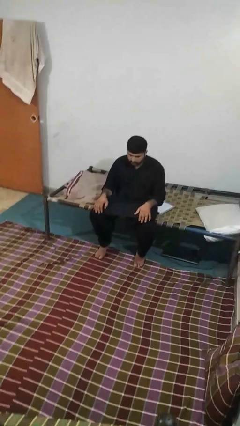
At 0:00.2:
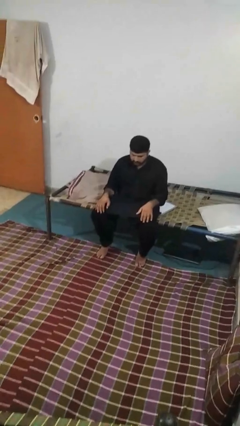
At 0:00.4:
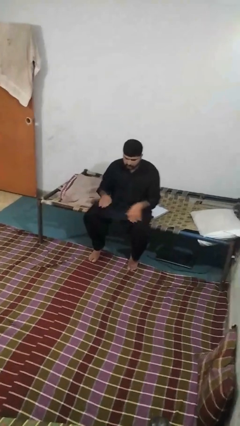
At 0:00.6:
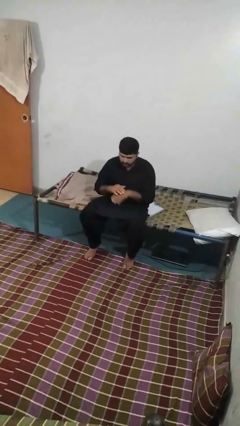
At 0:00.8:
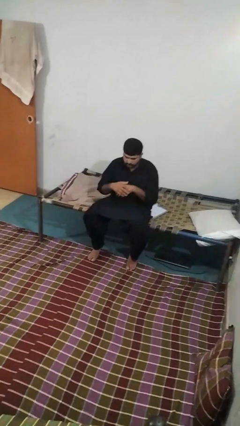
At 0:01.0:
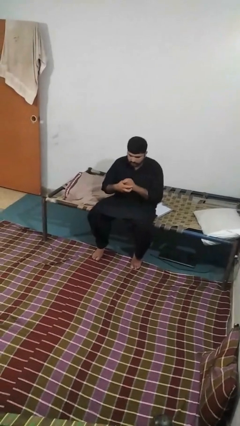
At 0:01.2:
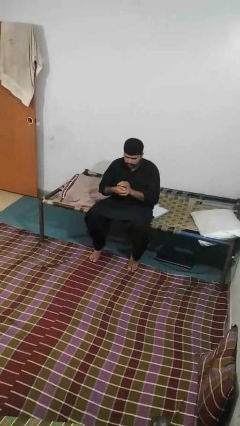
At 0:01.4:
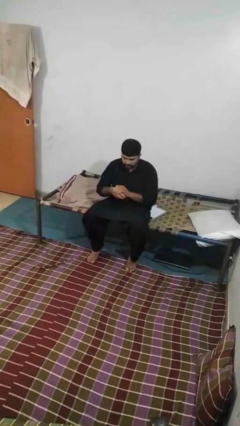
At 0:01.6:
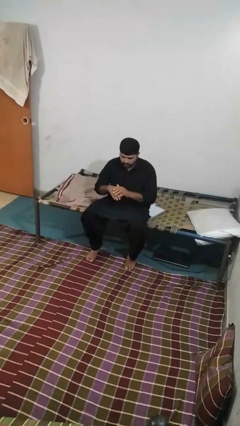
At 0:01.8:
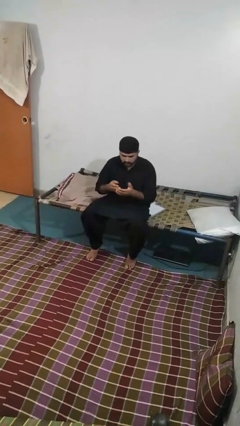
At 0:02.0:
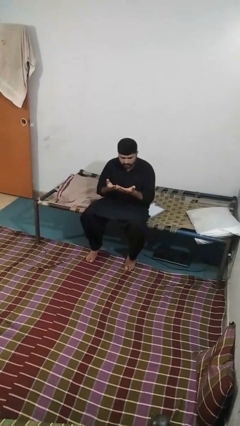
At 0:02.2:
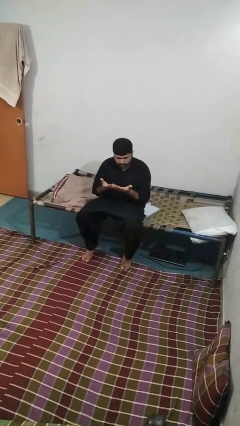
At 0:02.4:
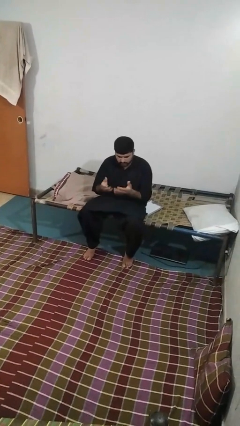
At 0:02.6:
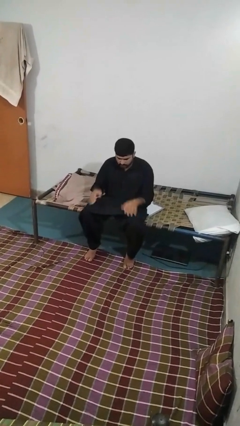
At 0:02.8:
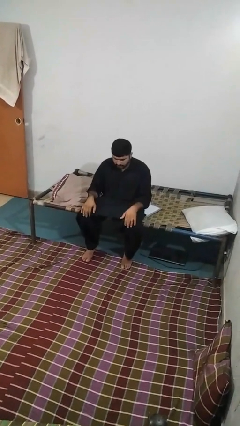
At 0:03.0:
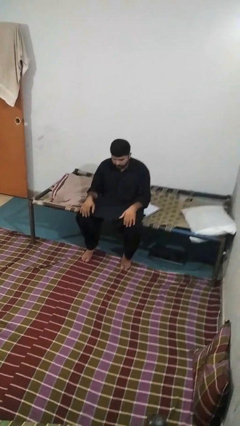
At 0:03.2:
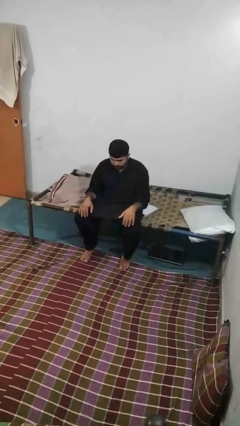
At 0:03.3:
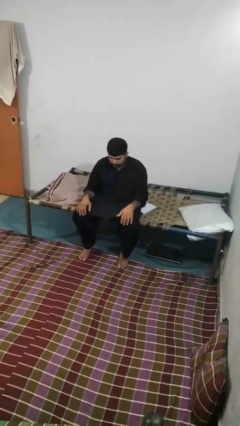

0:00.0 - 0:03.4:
person looks at hands in lap

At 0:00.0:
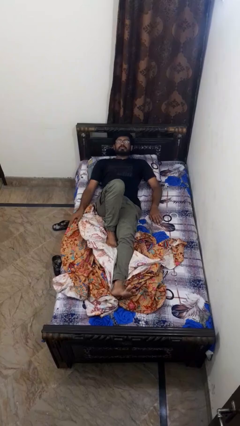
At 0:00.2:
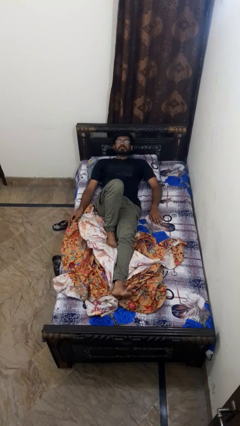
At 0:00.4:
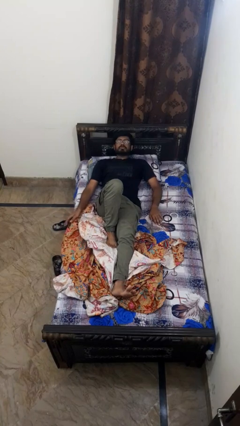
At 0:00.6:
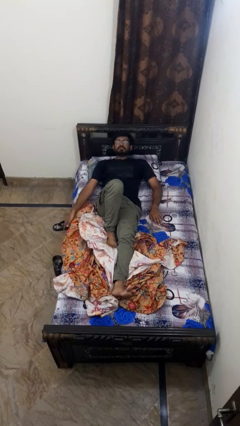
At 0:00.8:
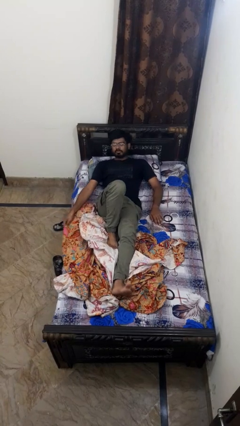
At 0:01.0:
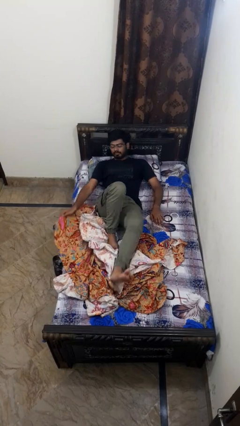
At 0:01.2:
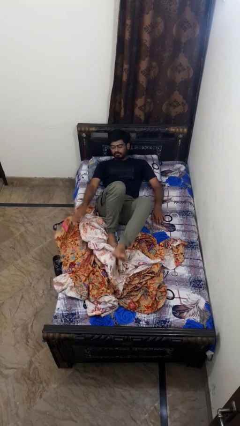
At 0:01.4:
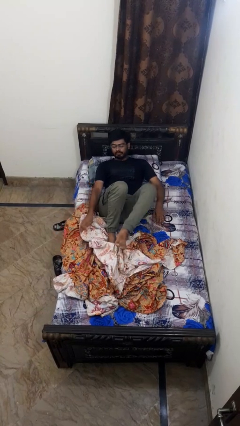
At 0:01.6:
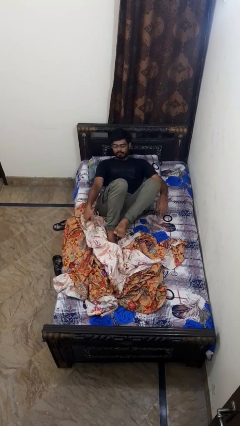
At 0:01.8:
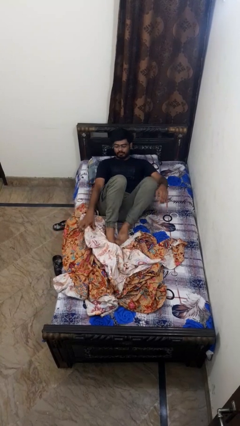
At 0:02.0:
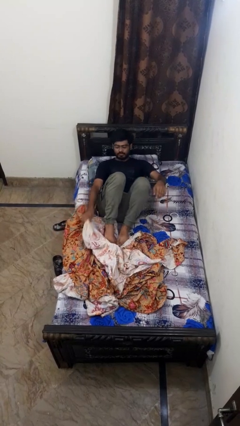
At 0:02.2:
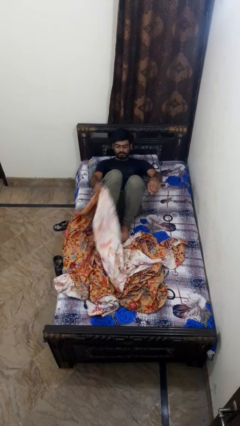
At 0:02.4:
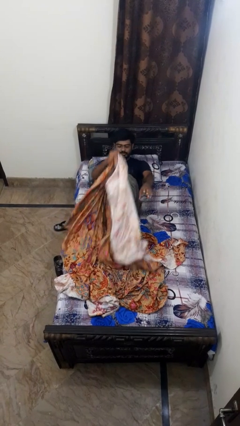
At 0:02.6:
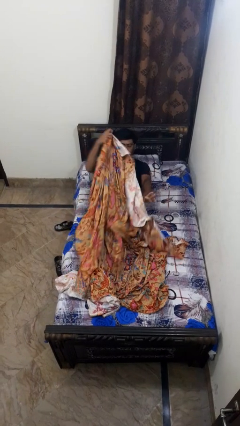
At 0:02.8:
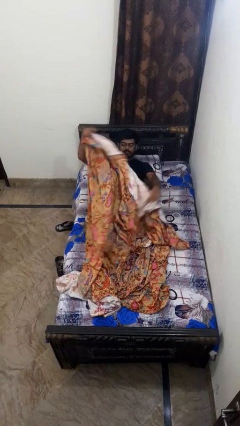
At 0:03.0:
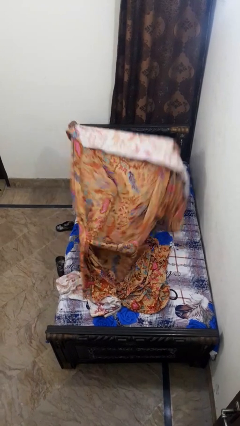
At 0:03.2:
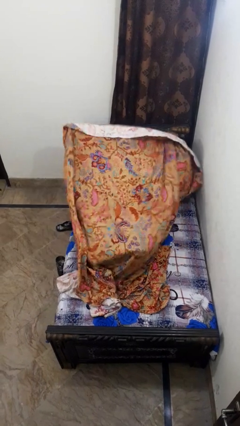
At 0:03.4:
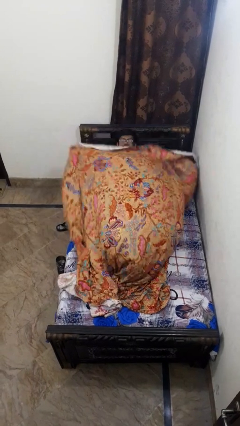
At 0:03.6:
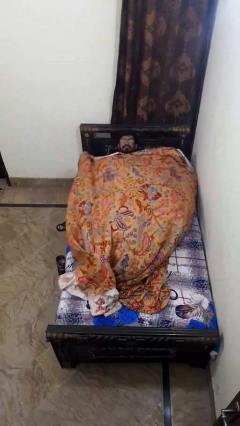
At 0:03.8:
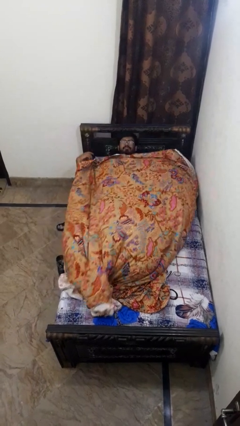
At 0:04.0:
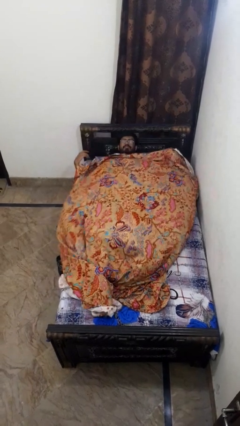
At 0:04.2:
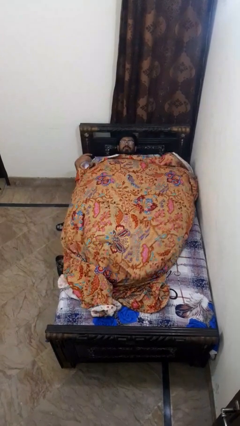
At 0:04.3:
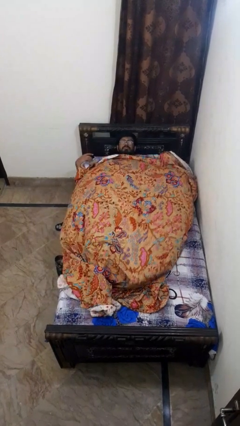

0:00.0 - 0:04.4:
person covers with bedsheets

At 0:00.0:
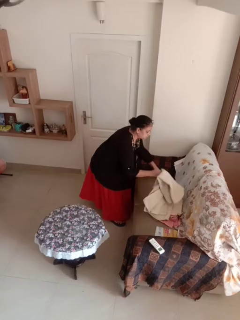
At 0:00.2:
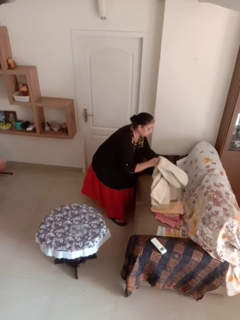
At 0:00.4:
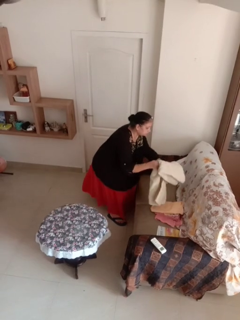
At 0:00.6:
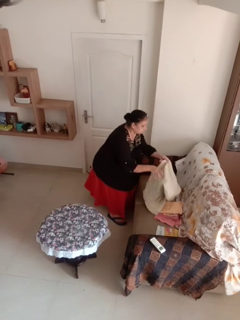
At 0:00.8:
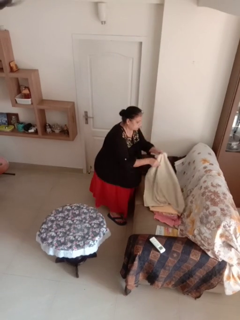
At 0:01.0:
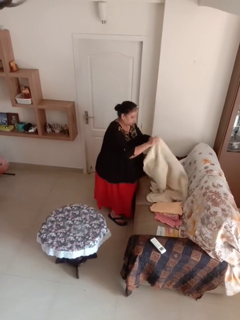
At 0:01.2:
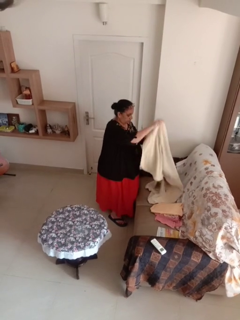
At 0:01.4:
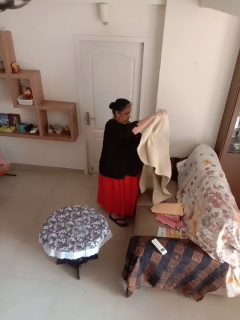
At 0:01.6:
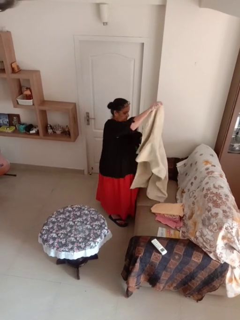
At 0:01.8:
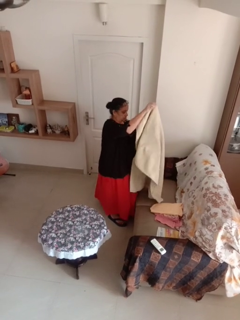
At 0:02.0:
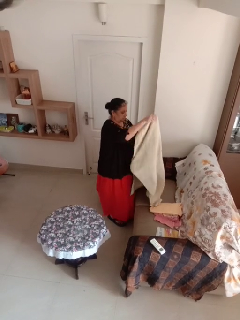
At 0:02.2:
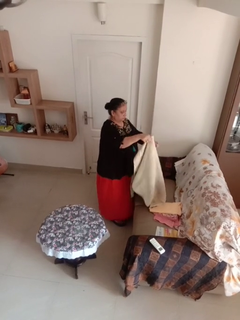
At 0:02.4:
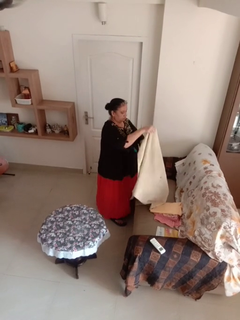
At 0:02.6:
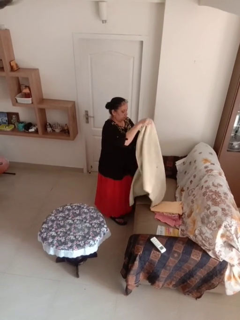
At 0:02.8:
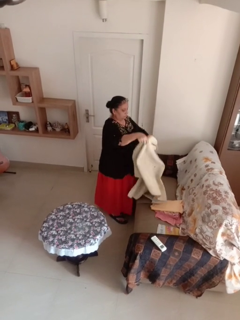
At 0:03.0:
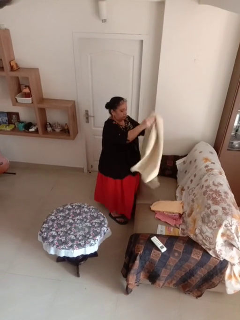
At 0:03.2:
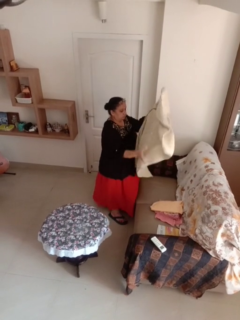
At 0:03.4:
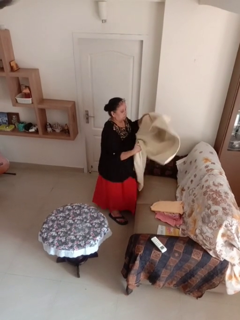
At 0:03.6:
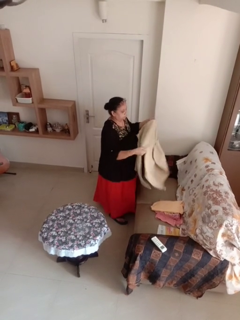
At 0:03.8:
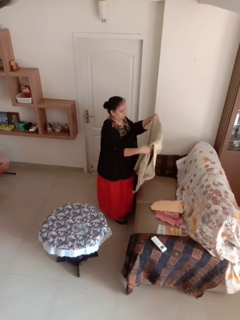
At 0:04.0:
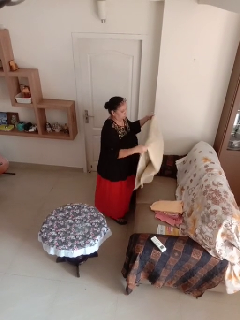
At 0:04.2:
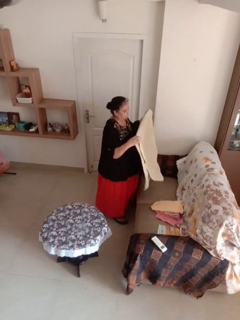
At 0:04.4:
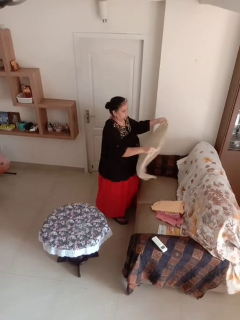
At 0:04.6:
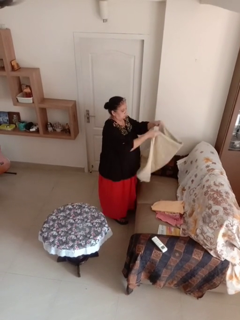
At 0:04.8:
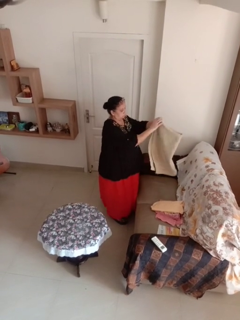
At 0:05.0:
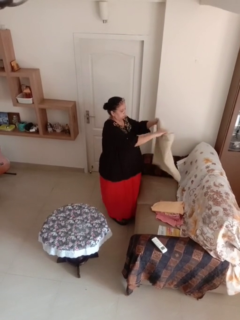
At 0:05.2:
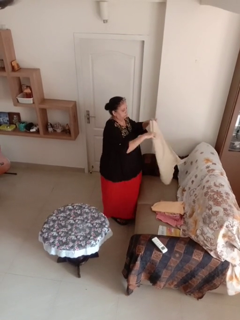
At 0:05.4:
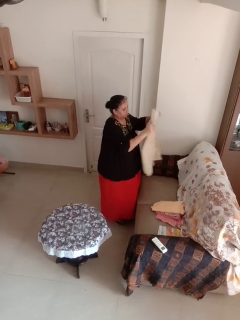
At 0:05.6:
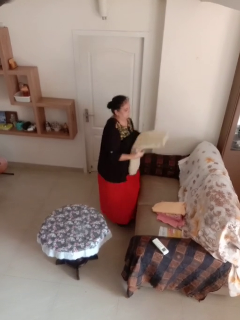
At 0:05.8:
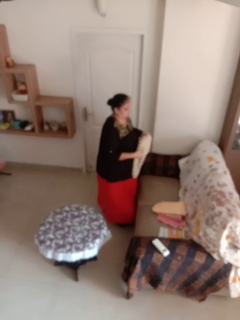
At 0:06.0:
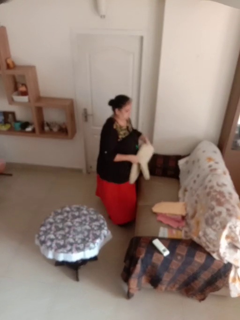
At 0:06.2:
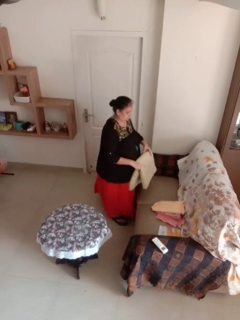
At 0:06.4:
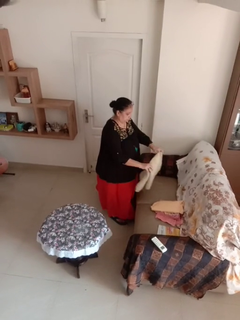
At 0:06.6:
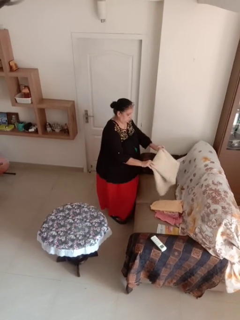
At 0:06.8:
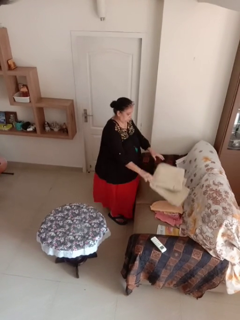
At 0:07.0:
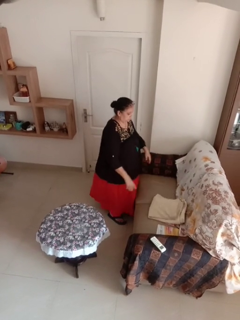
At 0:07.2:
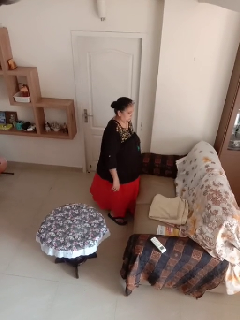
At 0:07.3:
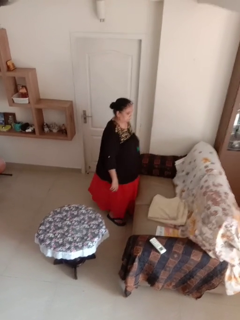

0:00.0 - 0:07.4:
person folds towel

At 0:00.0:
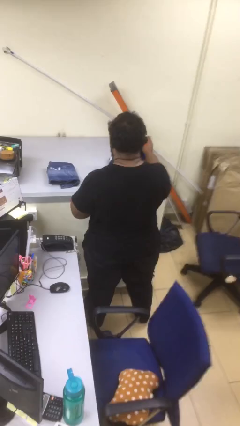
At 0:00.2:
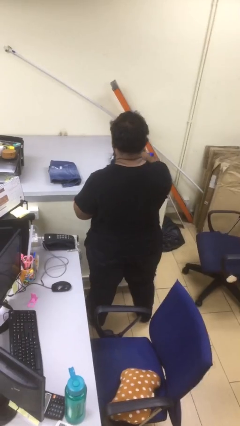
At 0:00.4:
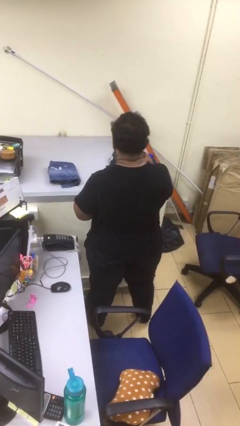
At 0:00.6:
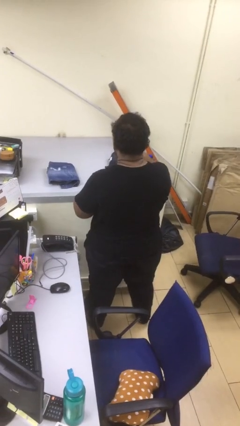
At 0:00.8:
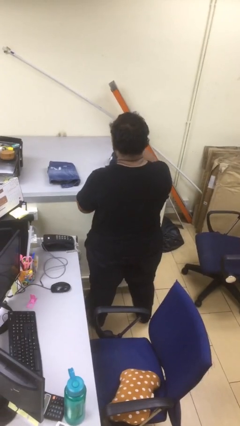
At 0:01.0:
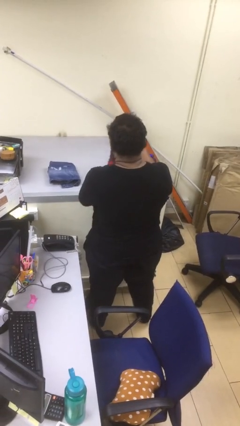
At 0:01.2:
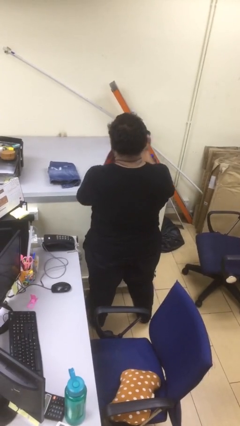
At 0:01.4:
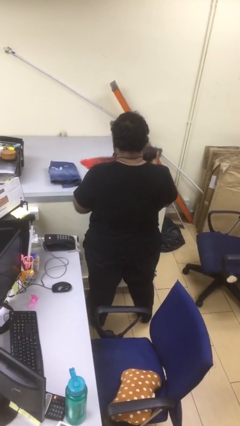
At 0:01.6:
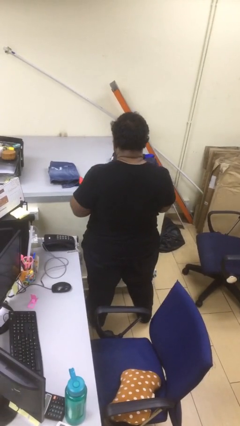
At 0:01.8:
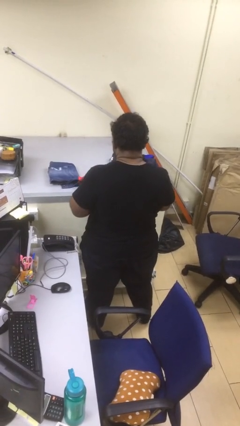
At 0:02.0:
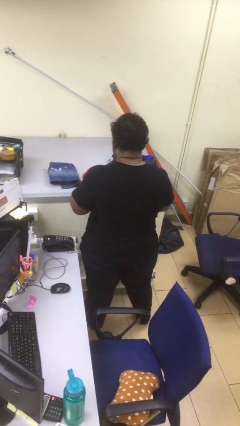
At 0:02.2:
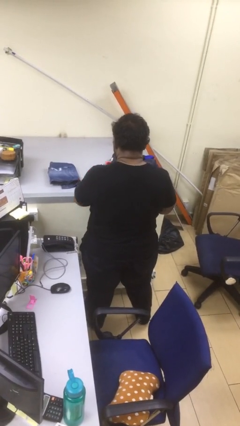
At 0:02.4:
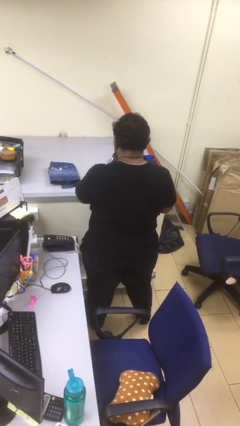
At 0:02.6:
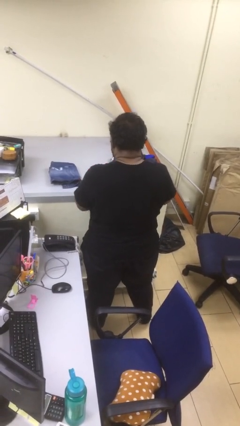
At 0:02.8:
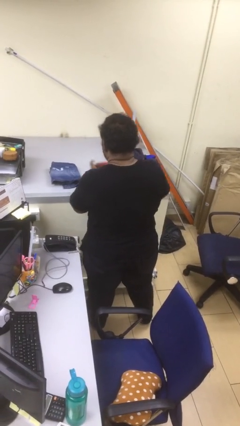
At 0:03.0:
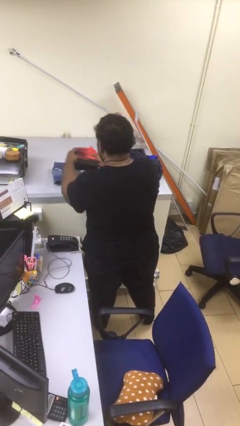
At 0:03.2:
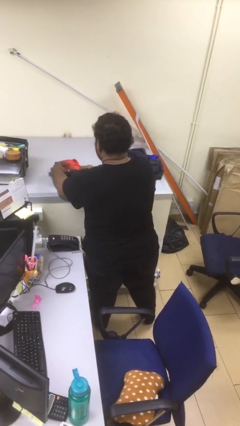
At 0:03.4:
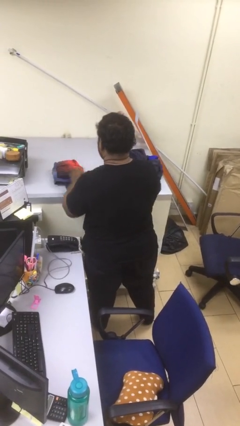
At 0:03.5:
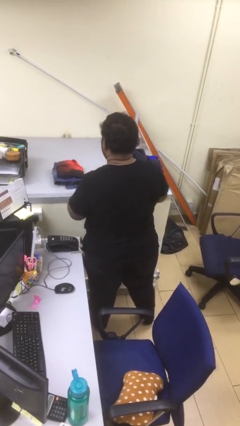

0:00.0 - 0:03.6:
person folds shirt

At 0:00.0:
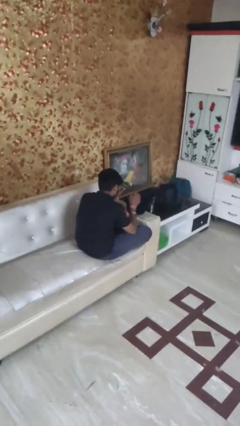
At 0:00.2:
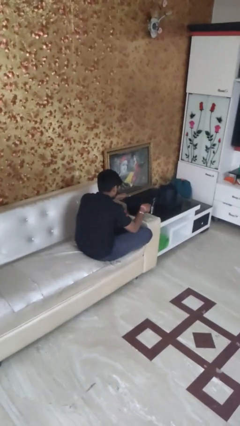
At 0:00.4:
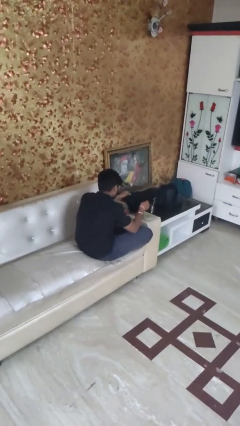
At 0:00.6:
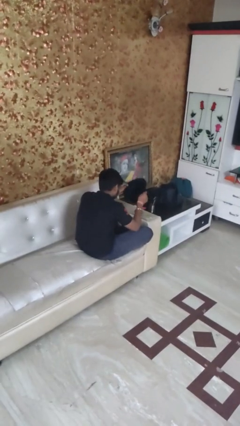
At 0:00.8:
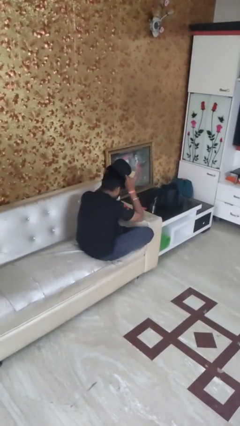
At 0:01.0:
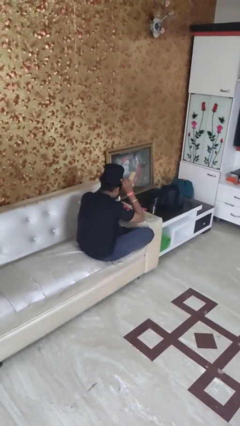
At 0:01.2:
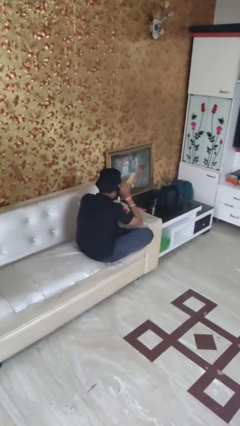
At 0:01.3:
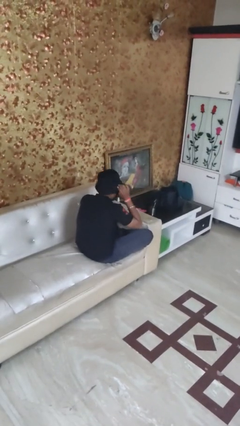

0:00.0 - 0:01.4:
person puts on hat
